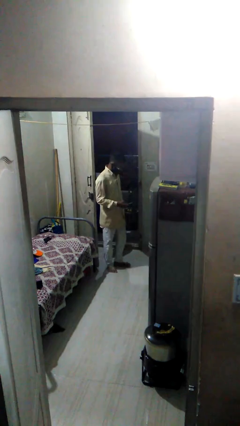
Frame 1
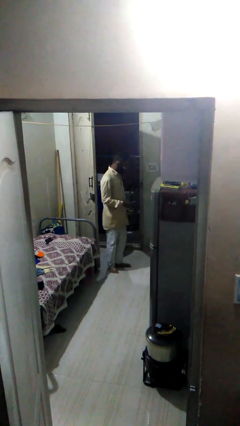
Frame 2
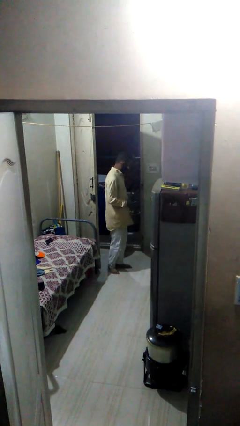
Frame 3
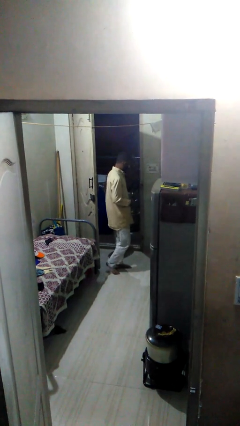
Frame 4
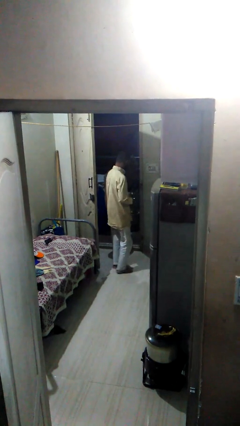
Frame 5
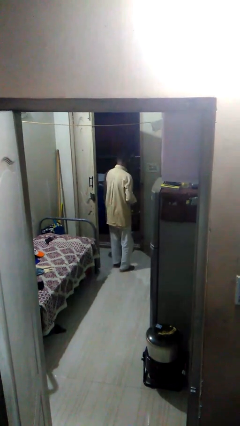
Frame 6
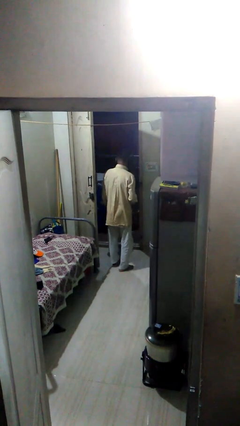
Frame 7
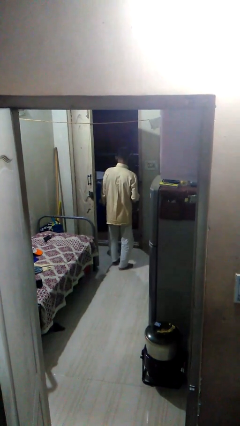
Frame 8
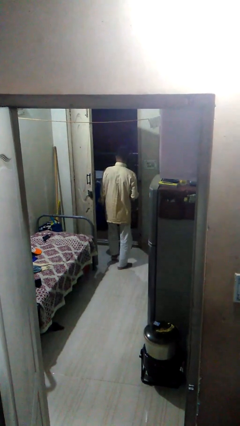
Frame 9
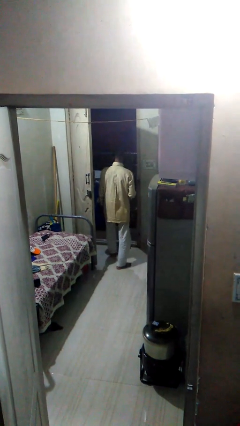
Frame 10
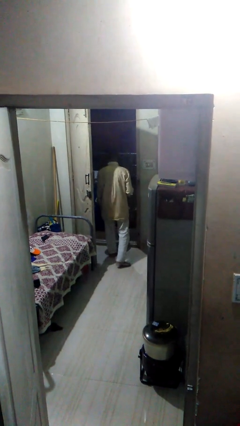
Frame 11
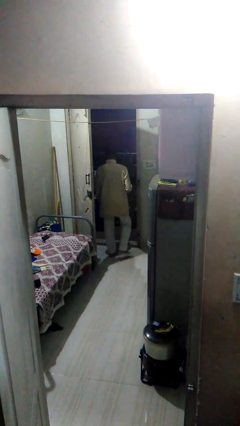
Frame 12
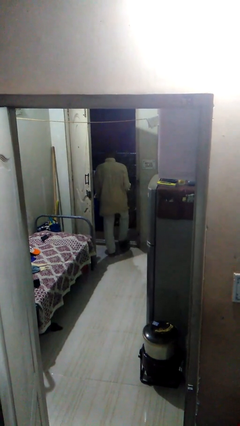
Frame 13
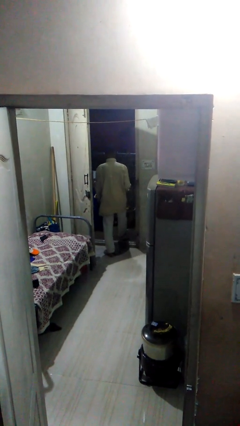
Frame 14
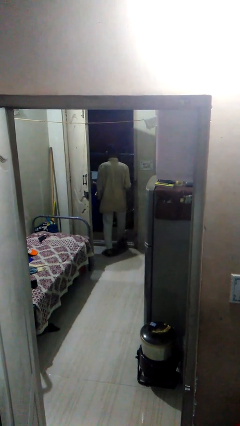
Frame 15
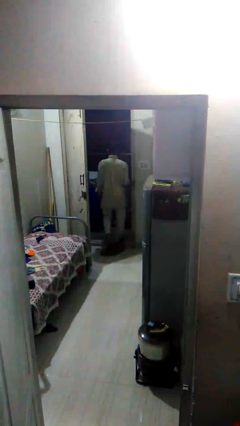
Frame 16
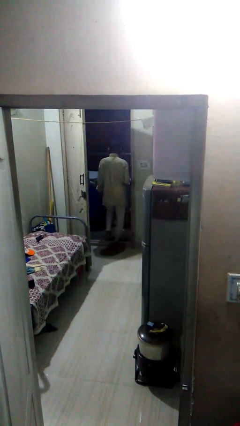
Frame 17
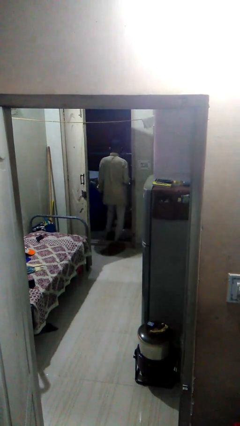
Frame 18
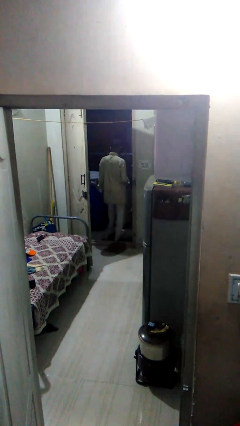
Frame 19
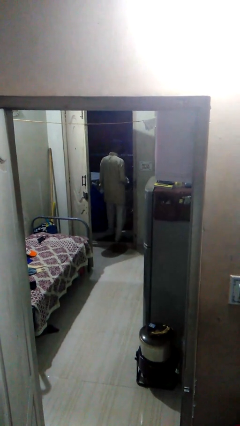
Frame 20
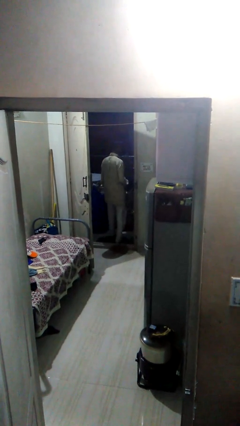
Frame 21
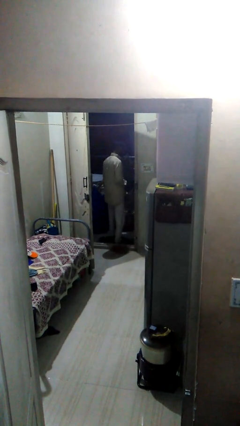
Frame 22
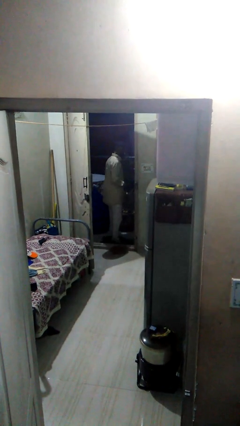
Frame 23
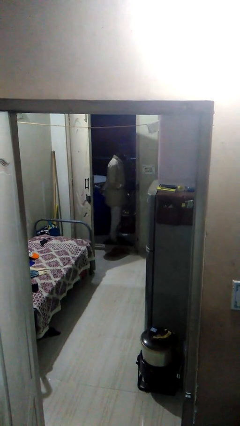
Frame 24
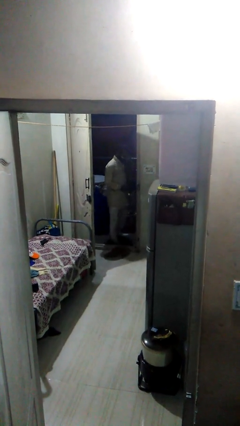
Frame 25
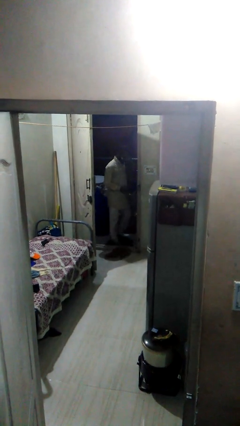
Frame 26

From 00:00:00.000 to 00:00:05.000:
person exits scene through structure

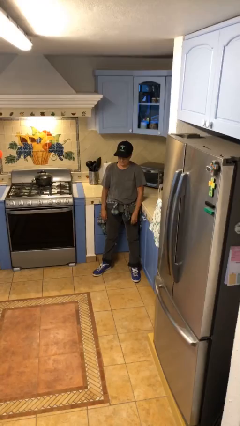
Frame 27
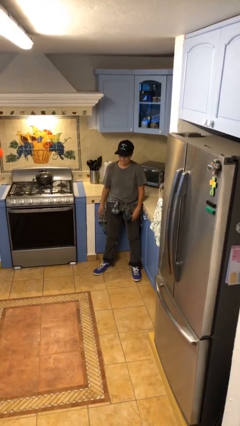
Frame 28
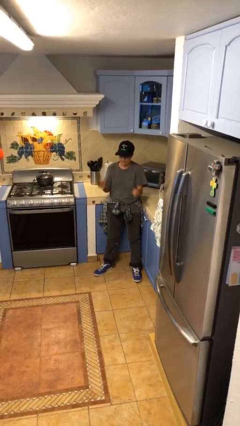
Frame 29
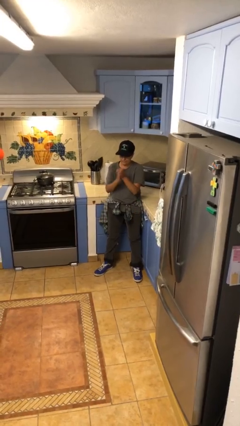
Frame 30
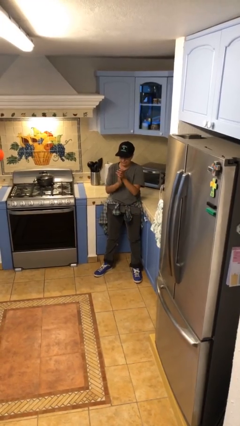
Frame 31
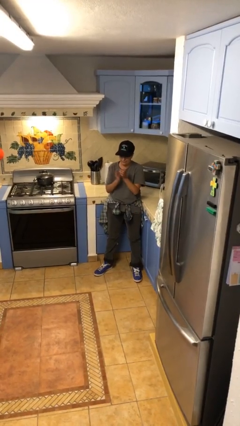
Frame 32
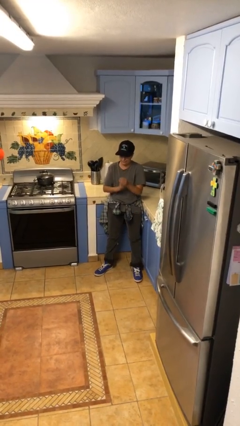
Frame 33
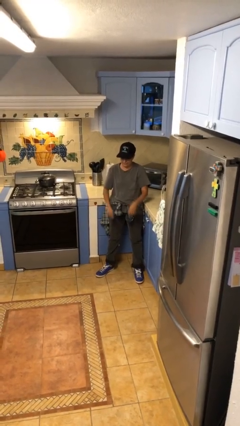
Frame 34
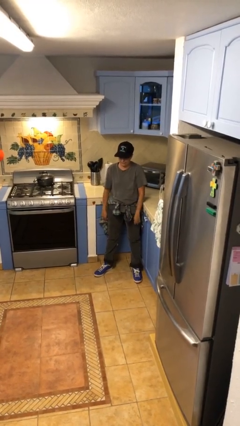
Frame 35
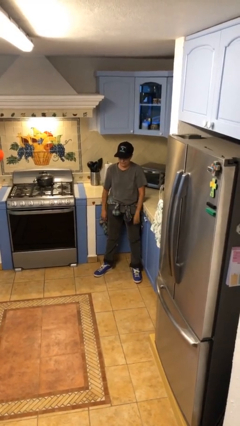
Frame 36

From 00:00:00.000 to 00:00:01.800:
person claps hands

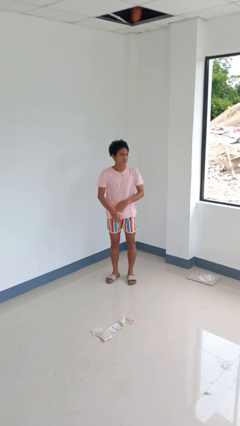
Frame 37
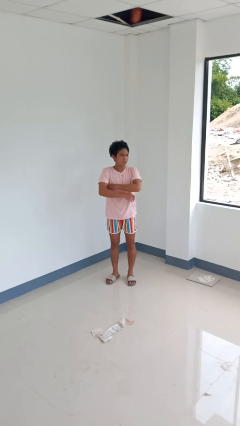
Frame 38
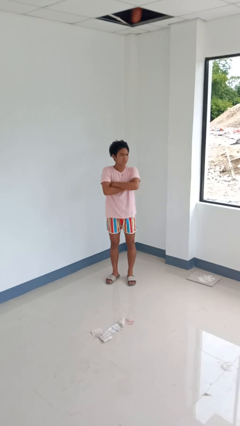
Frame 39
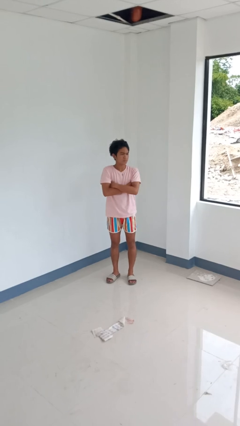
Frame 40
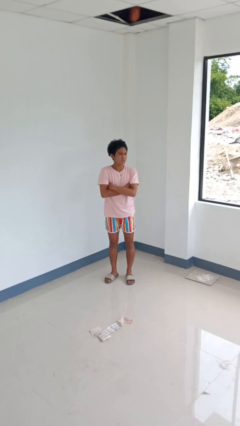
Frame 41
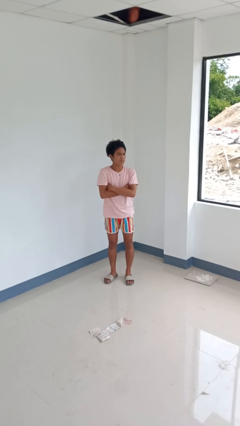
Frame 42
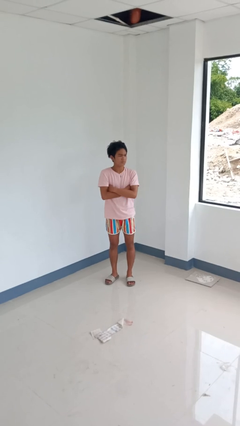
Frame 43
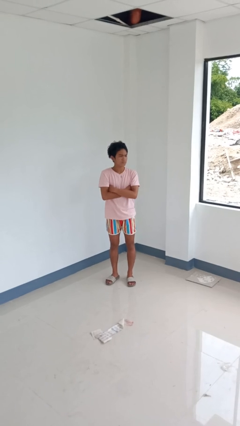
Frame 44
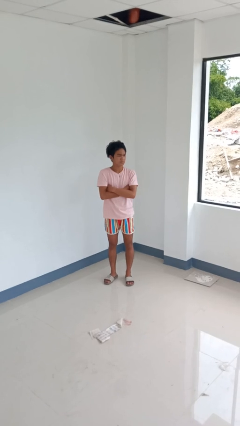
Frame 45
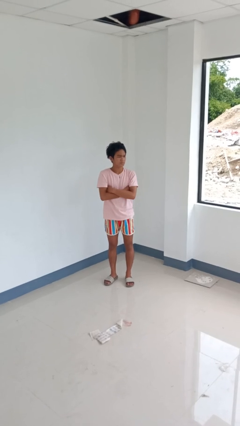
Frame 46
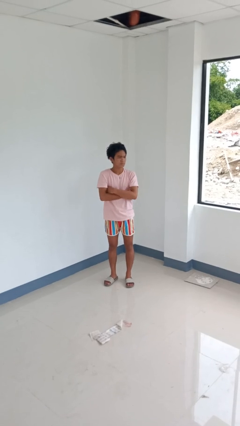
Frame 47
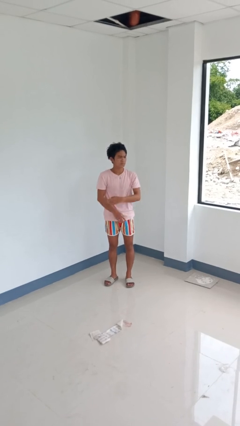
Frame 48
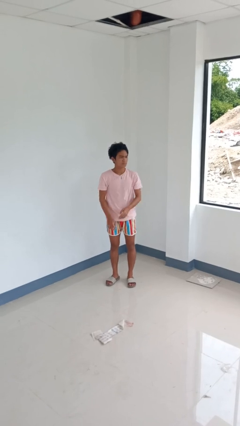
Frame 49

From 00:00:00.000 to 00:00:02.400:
person crosses arms

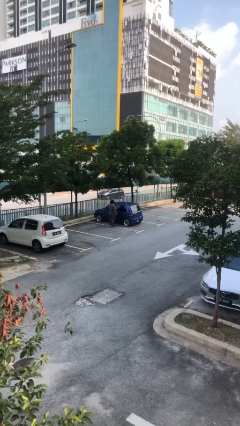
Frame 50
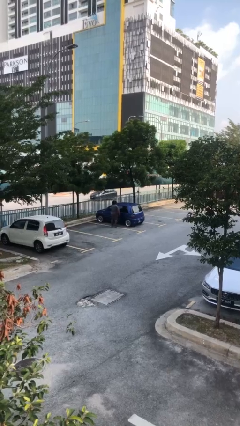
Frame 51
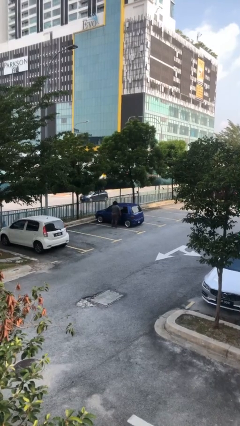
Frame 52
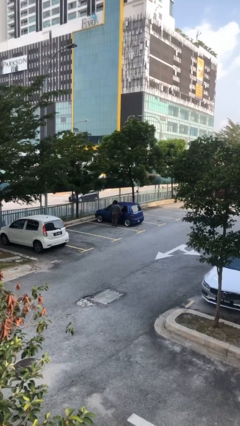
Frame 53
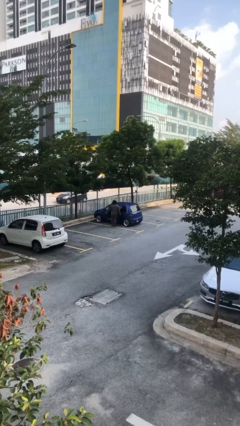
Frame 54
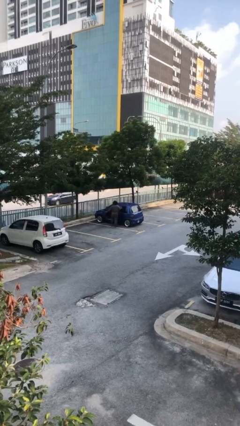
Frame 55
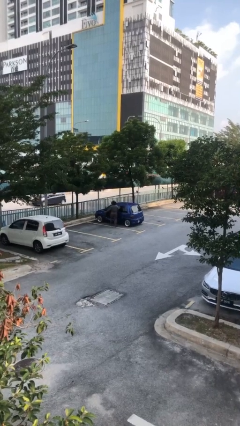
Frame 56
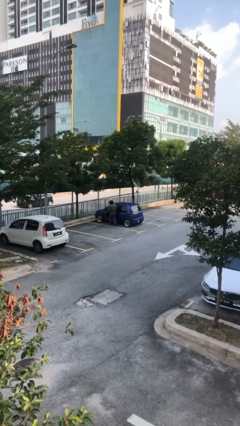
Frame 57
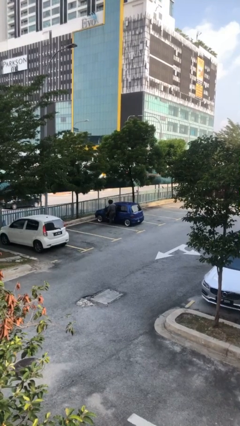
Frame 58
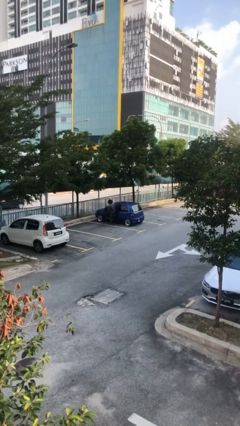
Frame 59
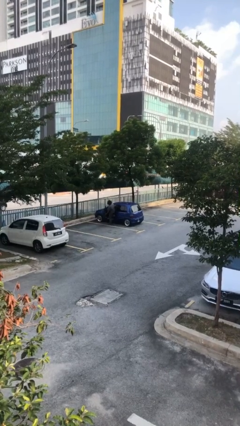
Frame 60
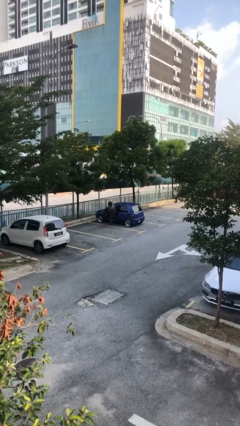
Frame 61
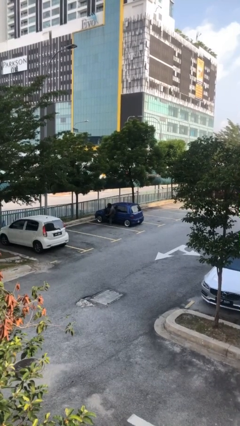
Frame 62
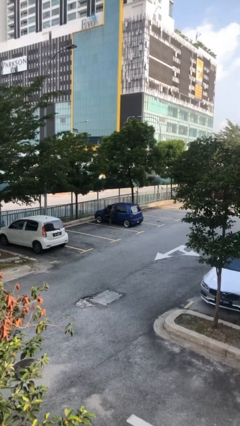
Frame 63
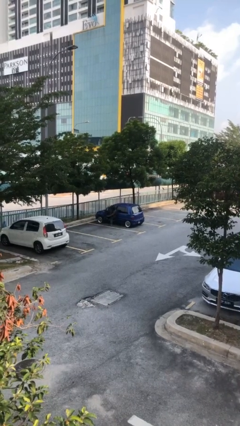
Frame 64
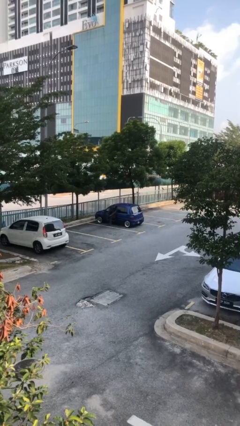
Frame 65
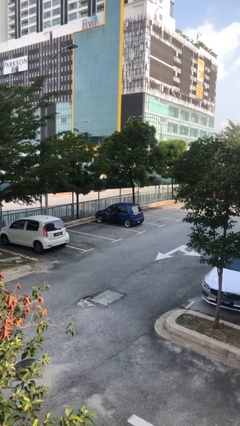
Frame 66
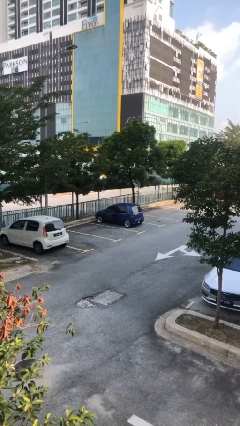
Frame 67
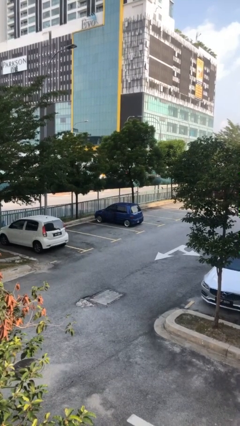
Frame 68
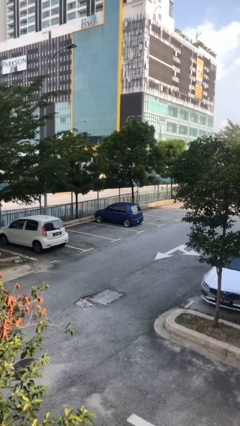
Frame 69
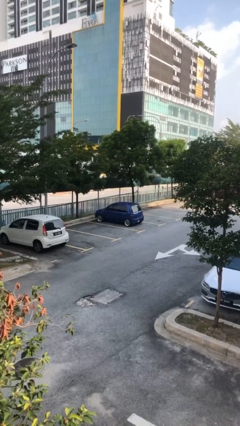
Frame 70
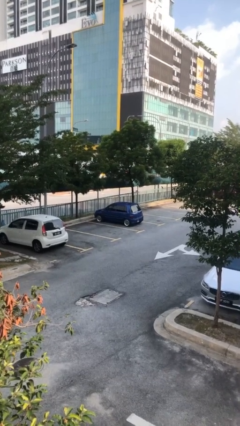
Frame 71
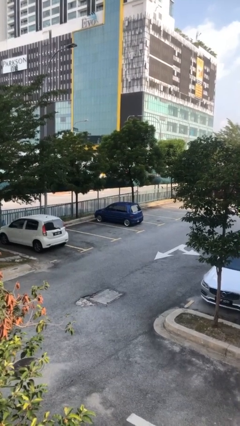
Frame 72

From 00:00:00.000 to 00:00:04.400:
car picks up person

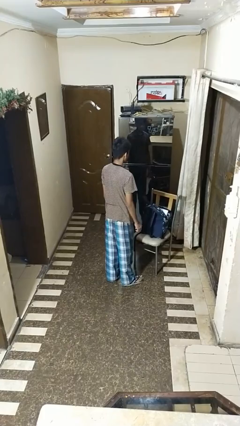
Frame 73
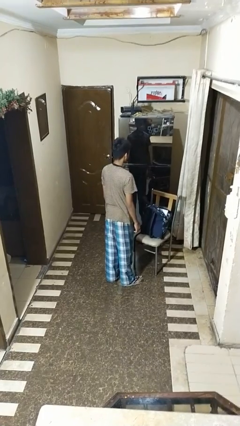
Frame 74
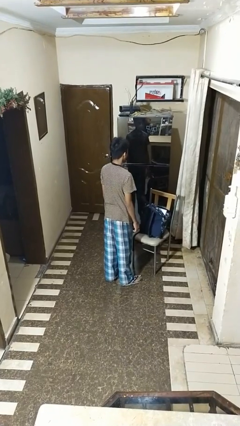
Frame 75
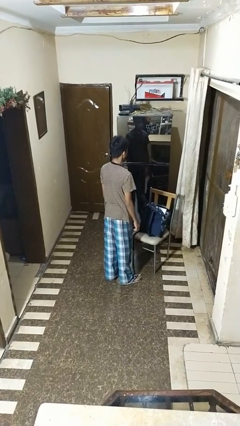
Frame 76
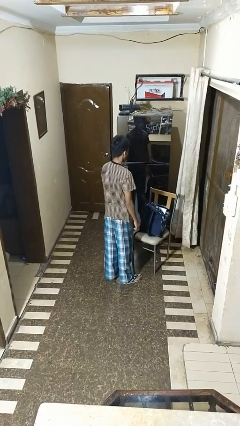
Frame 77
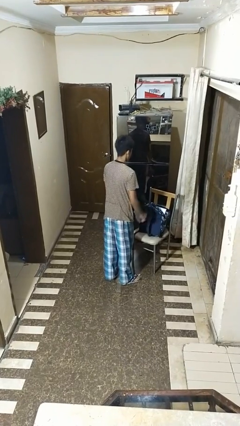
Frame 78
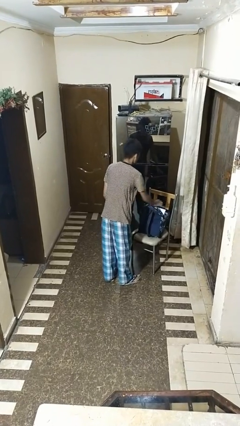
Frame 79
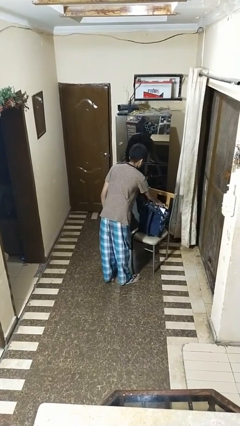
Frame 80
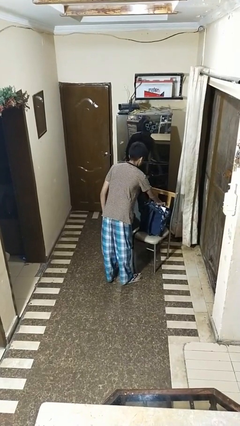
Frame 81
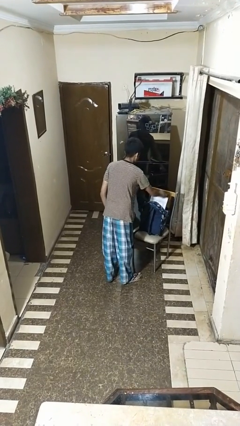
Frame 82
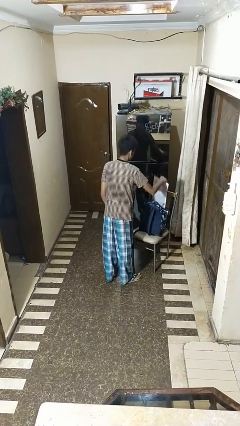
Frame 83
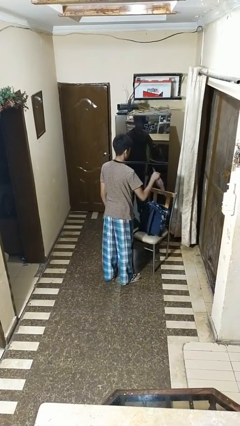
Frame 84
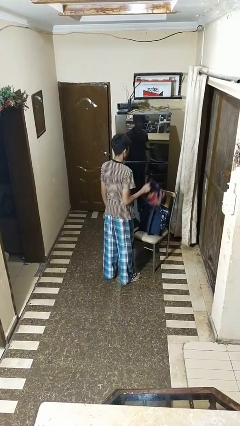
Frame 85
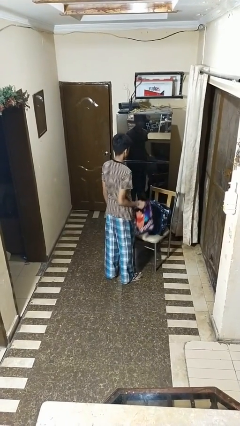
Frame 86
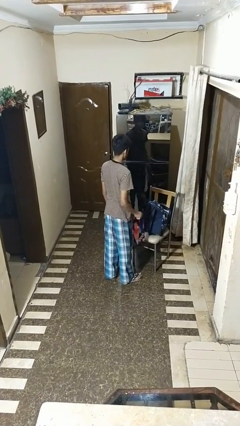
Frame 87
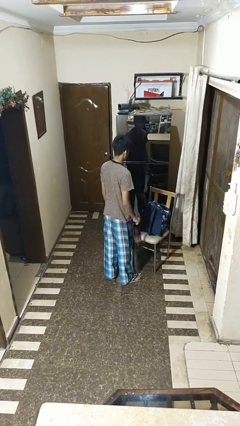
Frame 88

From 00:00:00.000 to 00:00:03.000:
person takes object from bag

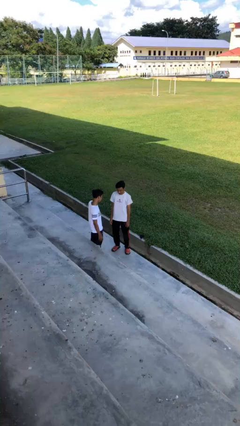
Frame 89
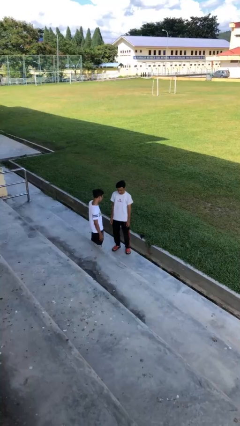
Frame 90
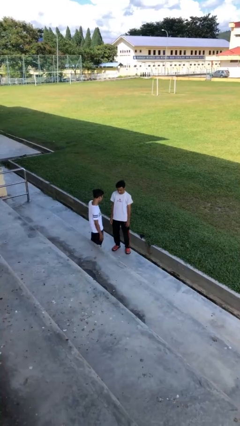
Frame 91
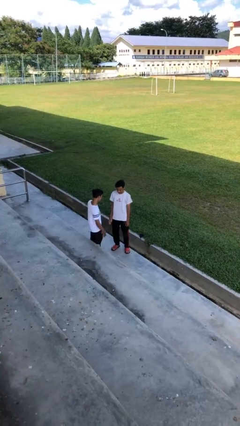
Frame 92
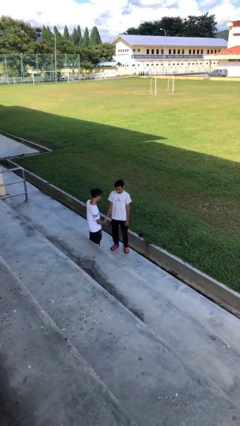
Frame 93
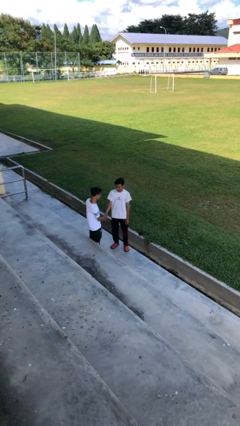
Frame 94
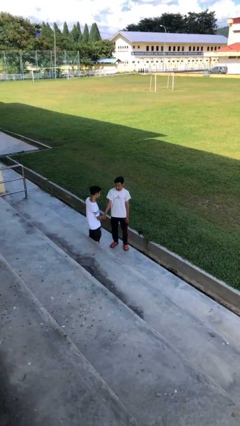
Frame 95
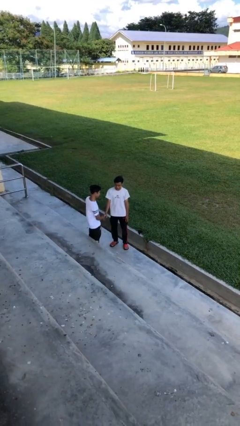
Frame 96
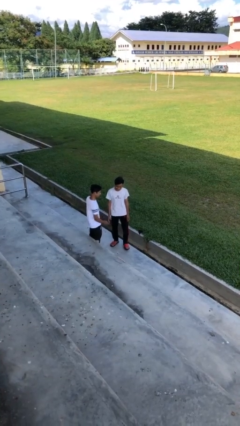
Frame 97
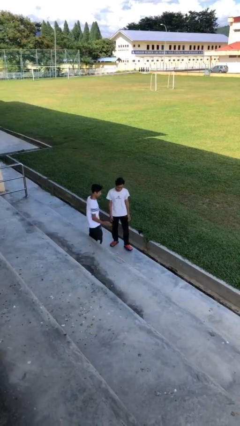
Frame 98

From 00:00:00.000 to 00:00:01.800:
person shakes hand
